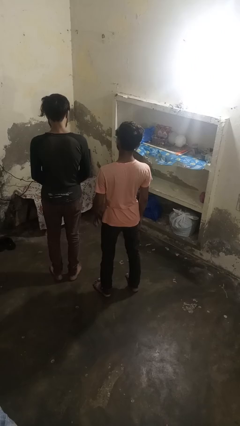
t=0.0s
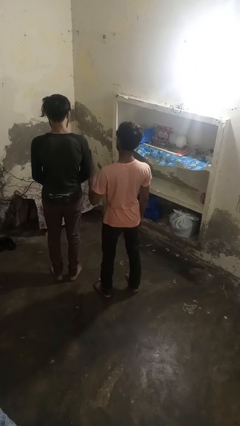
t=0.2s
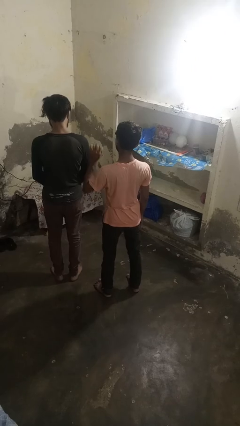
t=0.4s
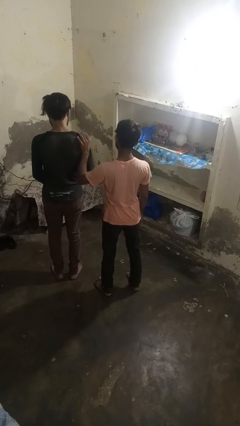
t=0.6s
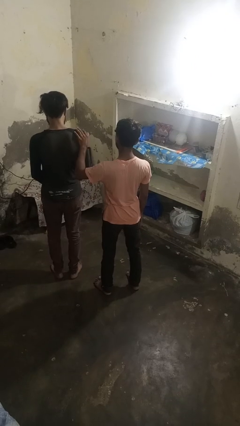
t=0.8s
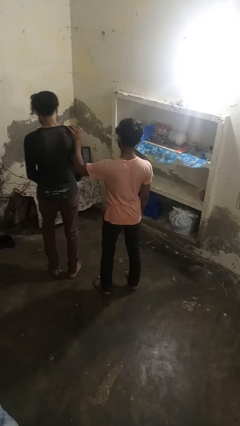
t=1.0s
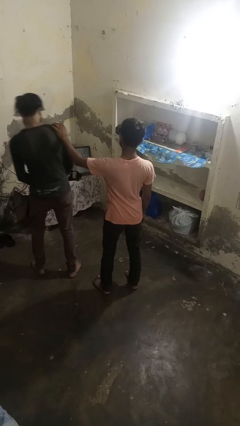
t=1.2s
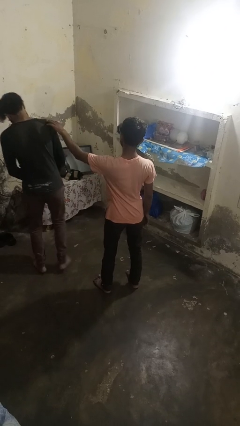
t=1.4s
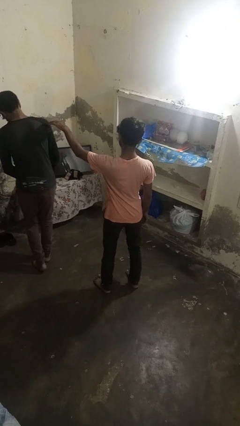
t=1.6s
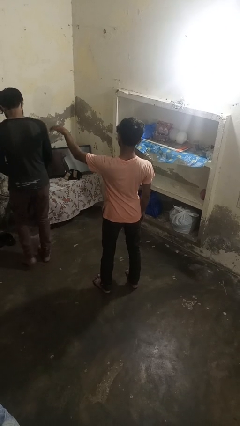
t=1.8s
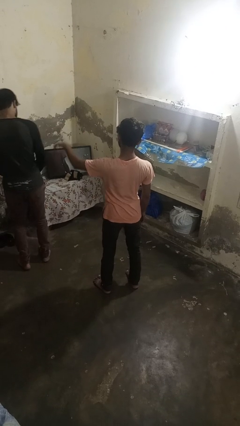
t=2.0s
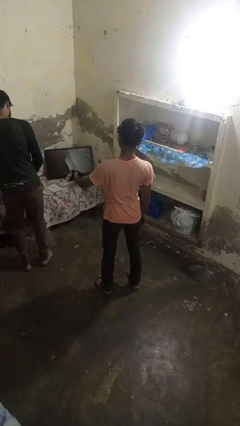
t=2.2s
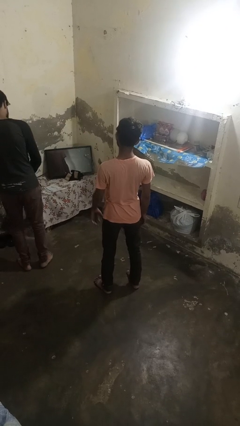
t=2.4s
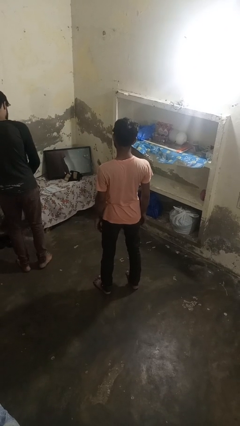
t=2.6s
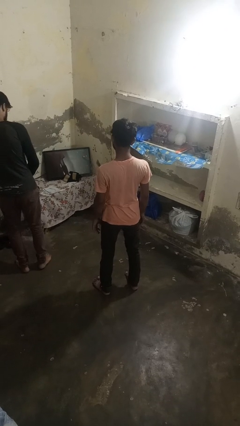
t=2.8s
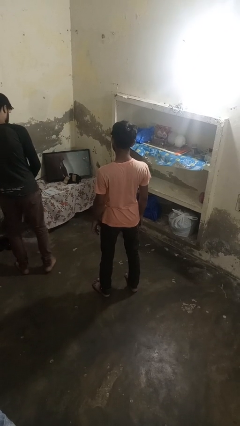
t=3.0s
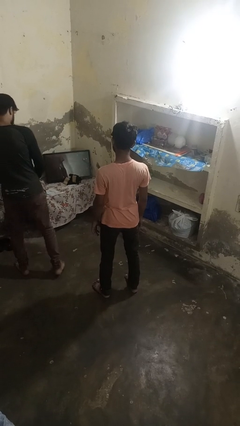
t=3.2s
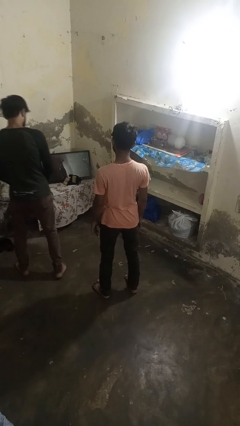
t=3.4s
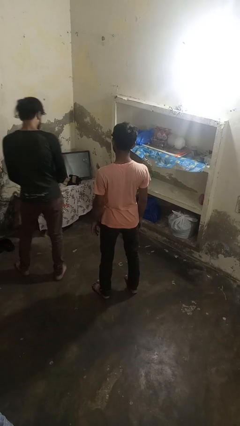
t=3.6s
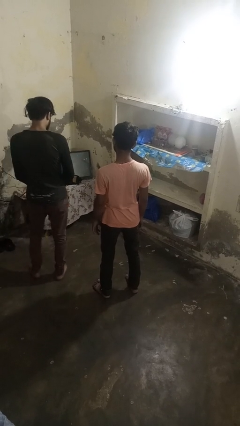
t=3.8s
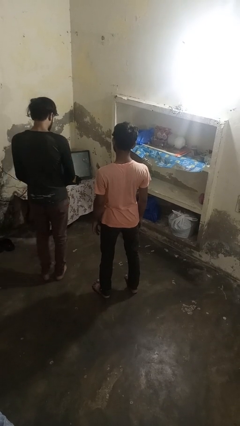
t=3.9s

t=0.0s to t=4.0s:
person shoves person

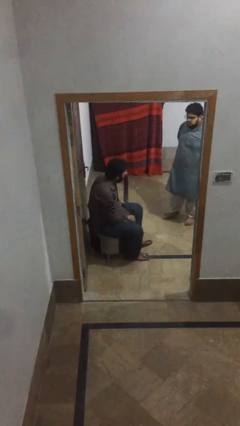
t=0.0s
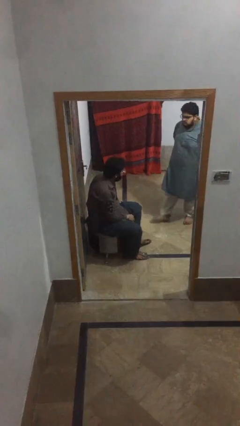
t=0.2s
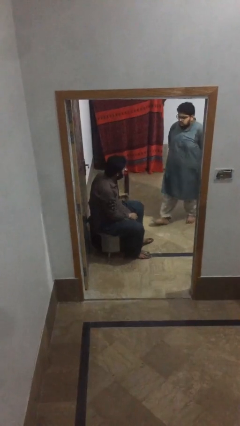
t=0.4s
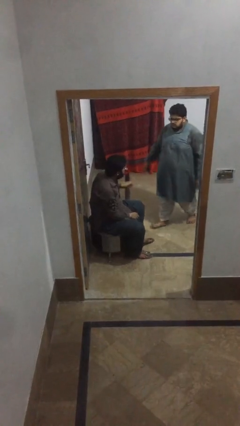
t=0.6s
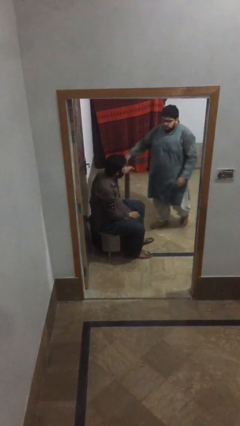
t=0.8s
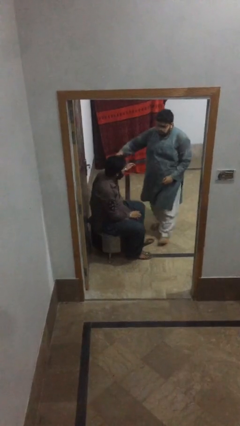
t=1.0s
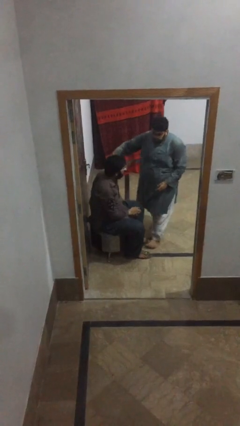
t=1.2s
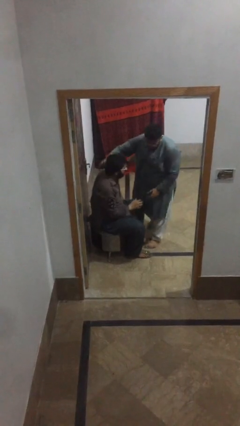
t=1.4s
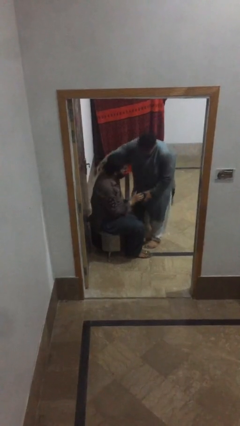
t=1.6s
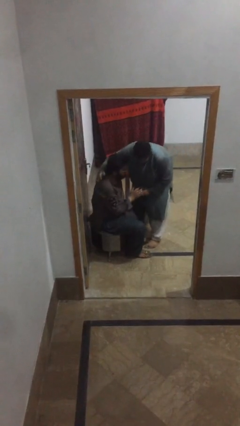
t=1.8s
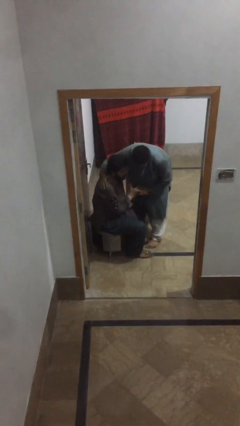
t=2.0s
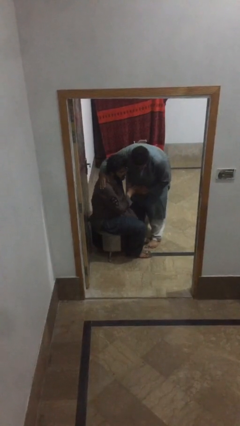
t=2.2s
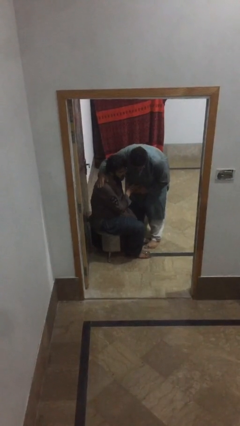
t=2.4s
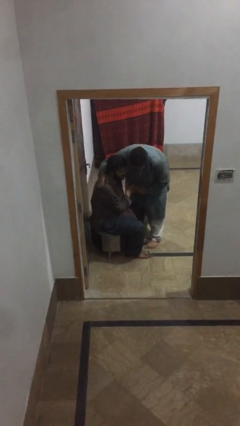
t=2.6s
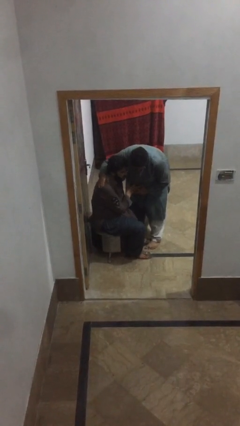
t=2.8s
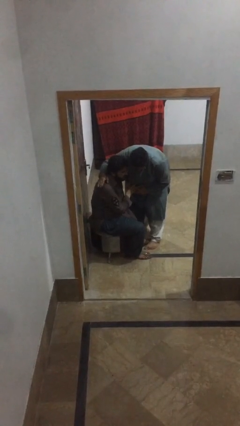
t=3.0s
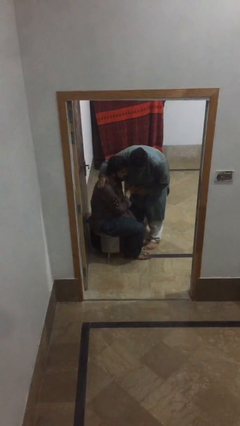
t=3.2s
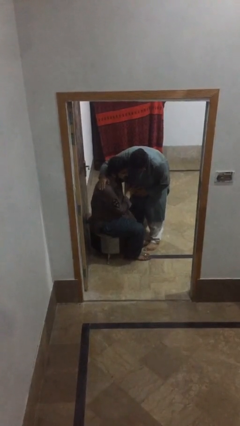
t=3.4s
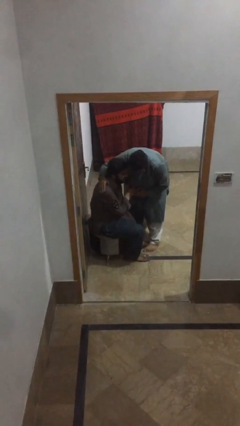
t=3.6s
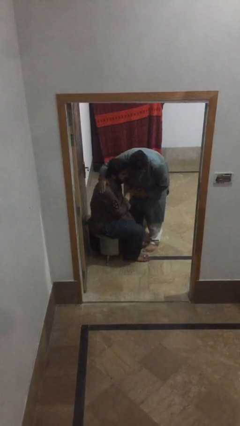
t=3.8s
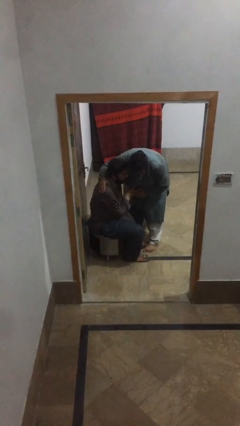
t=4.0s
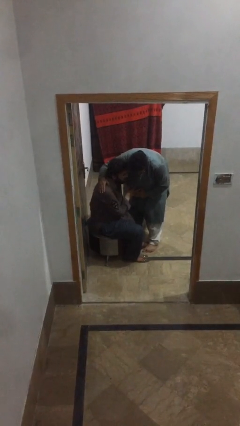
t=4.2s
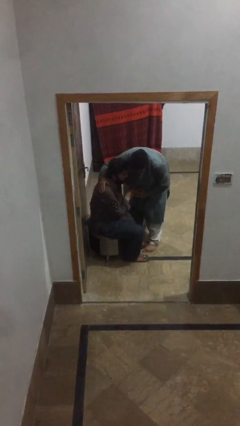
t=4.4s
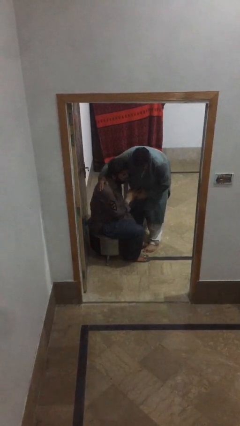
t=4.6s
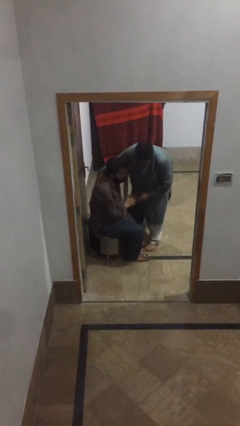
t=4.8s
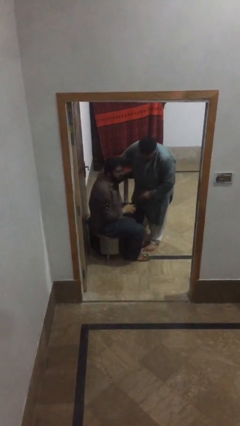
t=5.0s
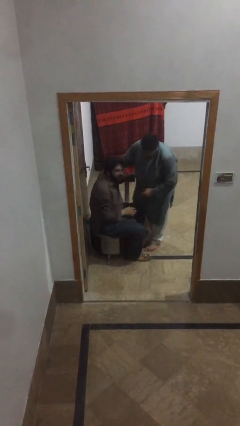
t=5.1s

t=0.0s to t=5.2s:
person embraces person

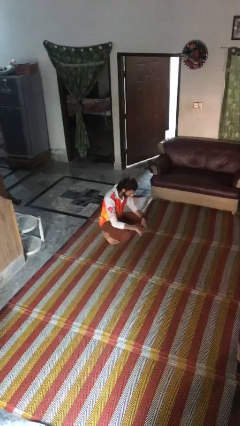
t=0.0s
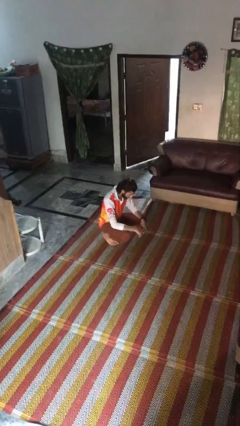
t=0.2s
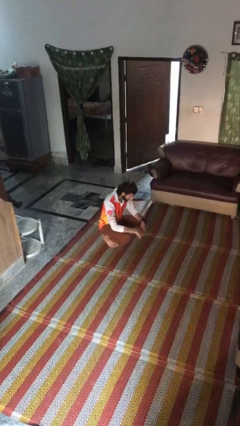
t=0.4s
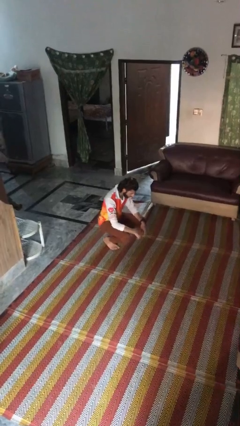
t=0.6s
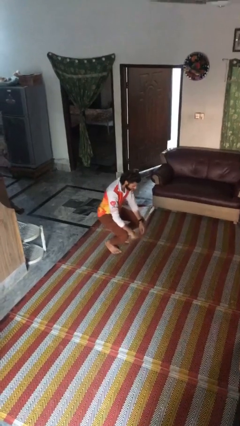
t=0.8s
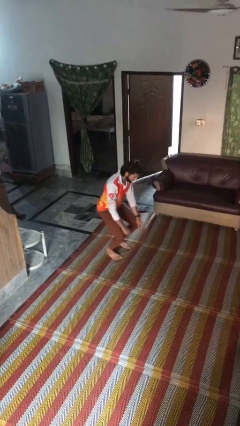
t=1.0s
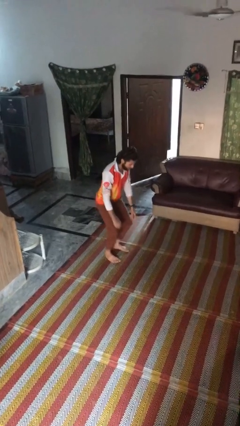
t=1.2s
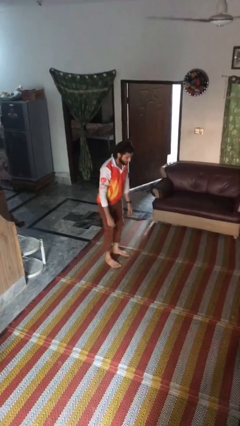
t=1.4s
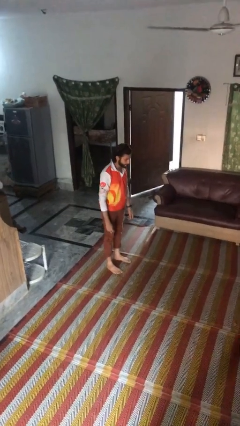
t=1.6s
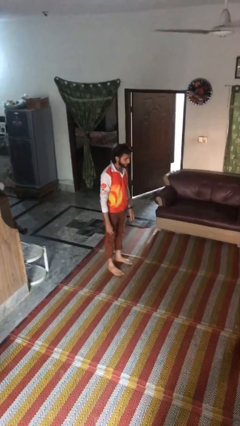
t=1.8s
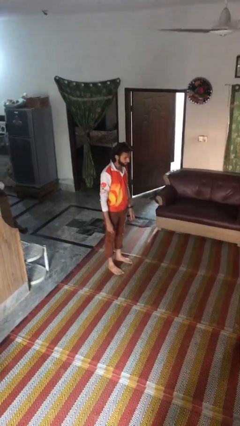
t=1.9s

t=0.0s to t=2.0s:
person stands up

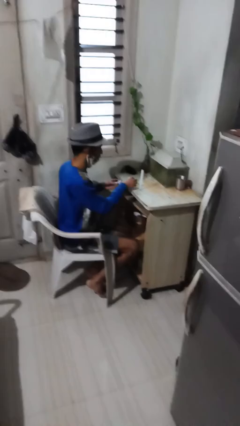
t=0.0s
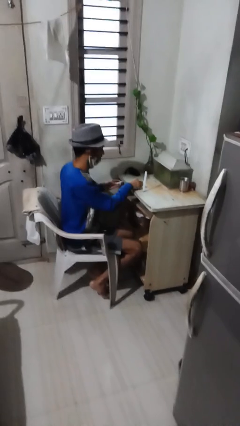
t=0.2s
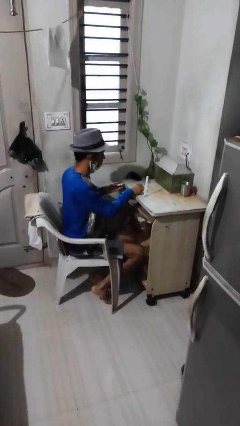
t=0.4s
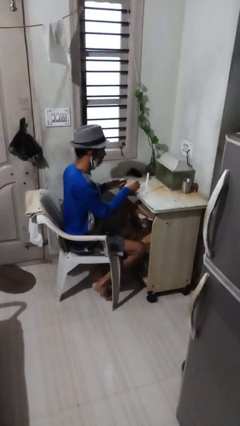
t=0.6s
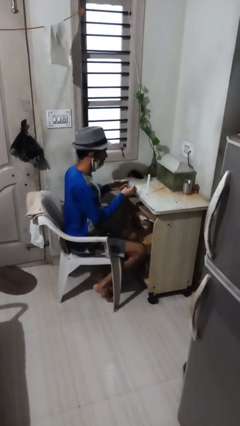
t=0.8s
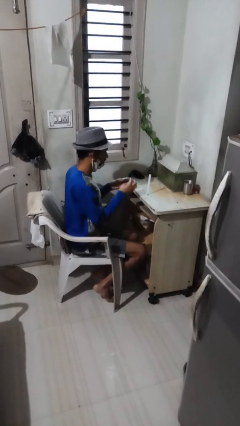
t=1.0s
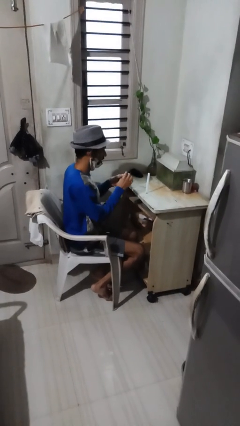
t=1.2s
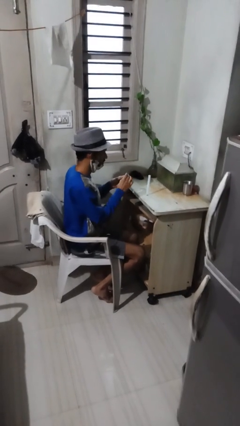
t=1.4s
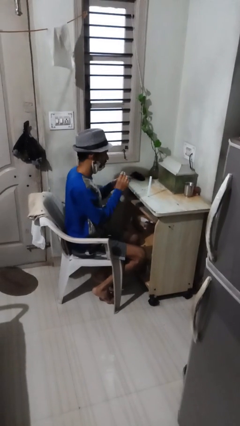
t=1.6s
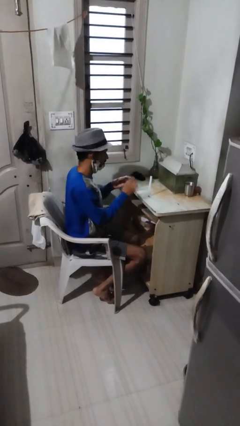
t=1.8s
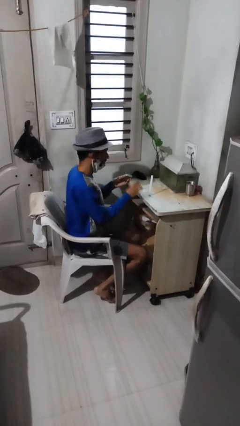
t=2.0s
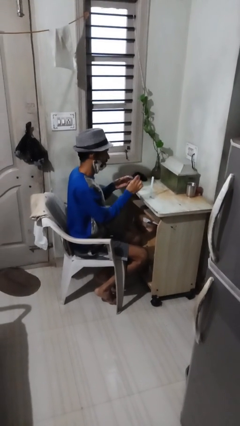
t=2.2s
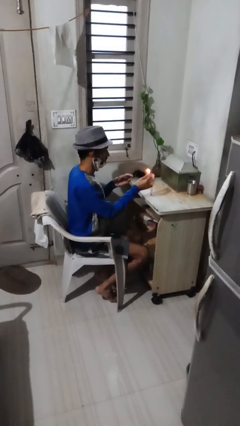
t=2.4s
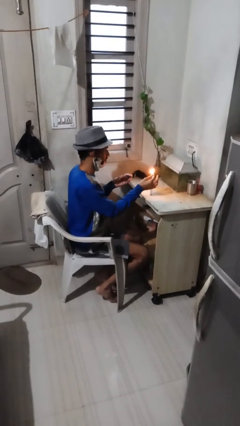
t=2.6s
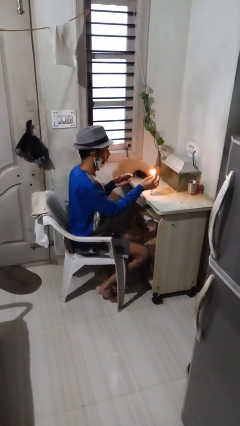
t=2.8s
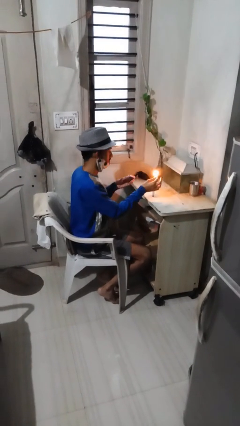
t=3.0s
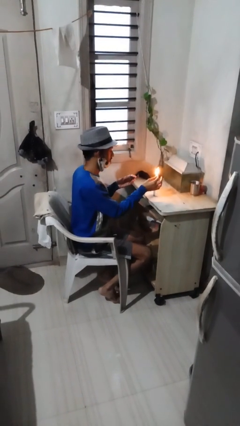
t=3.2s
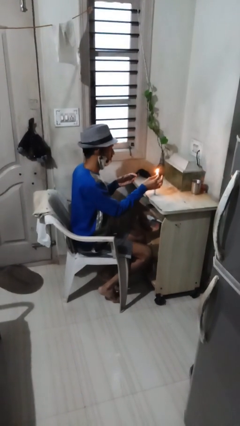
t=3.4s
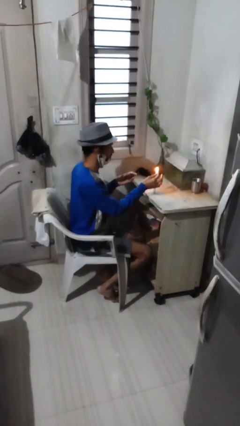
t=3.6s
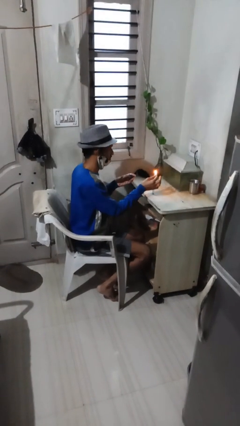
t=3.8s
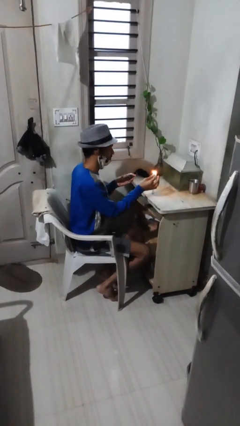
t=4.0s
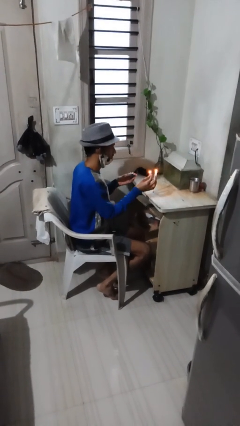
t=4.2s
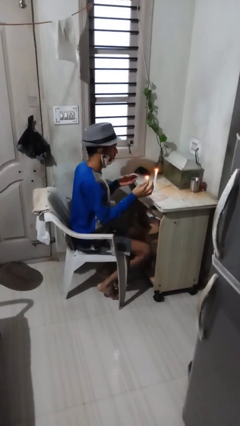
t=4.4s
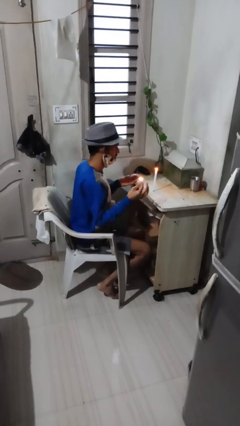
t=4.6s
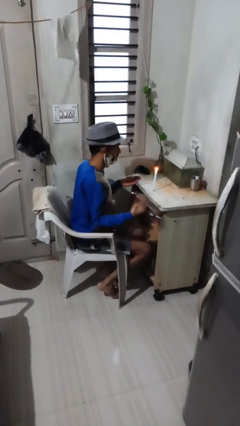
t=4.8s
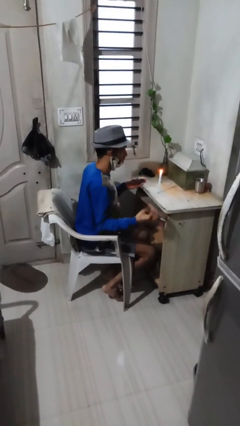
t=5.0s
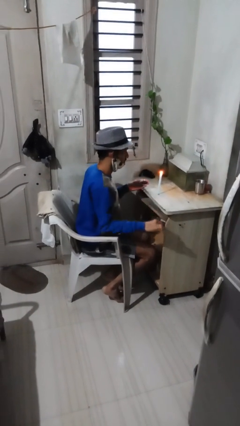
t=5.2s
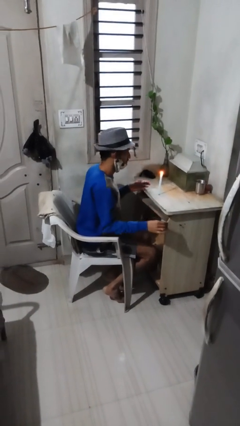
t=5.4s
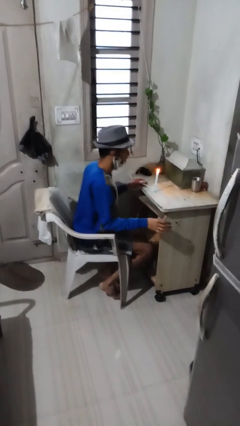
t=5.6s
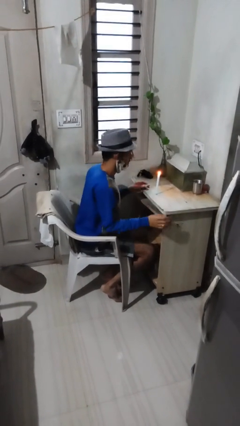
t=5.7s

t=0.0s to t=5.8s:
person lights candle

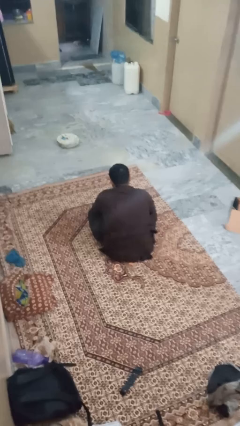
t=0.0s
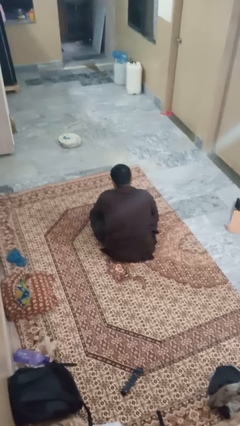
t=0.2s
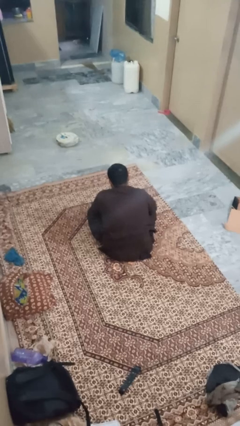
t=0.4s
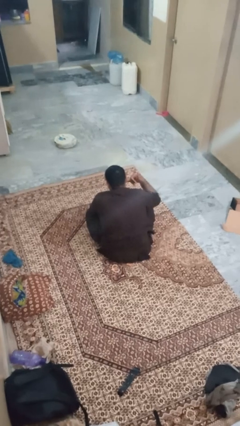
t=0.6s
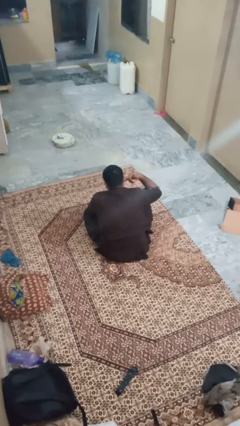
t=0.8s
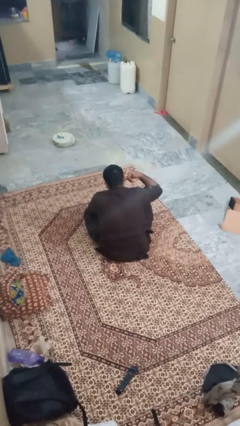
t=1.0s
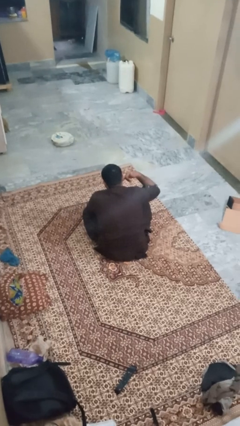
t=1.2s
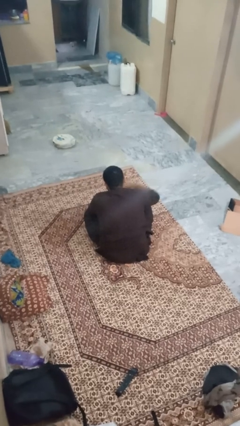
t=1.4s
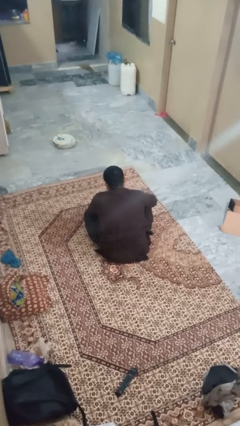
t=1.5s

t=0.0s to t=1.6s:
person gestures call me
